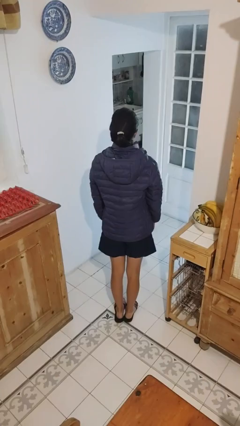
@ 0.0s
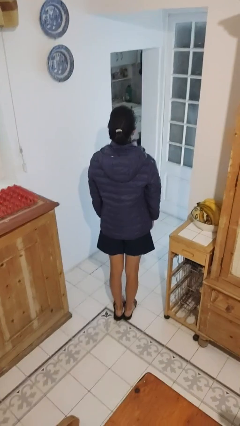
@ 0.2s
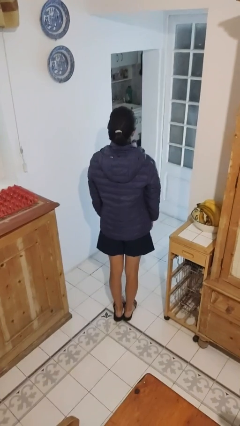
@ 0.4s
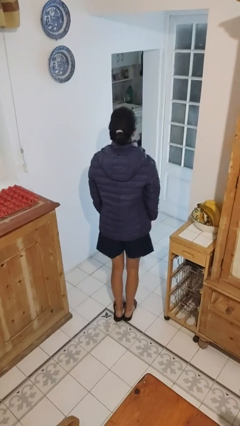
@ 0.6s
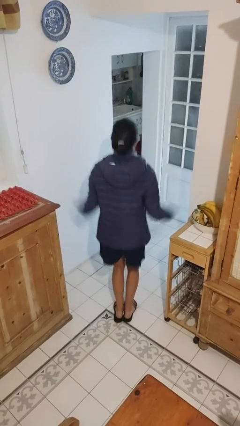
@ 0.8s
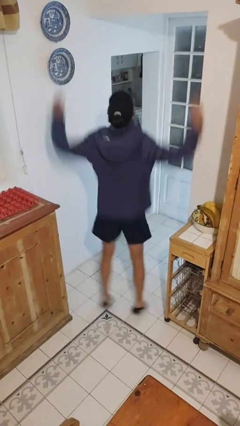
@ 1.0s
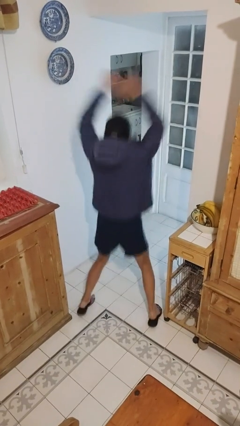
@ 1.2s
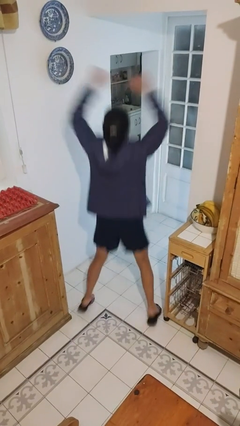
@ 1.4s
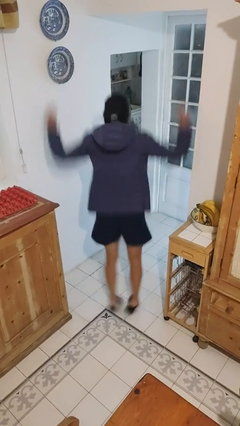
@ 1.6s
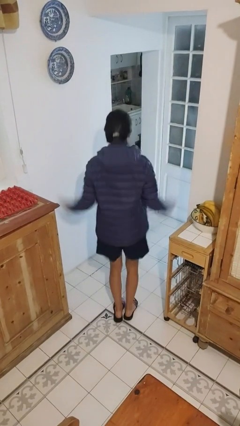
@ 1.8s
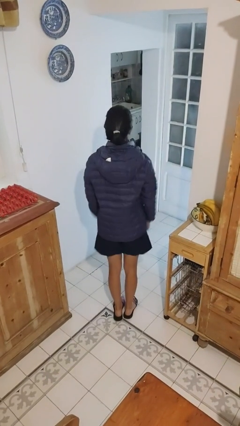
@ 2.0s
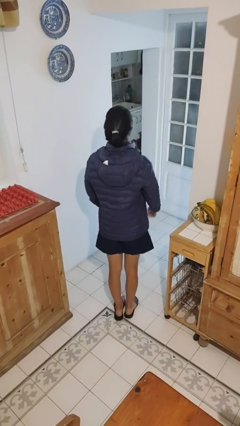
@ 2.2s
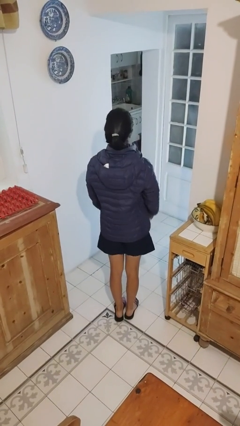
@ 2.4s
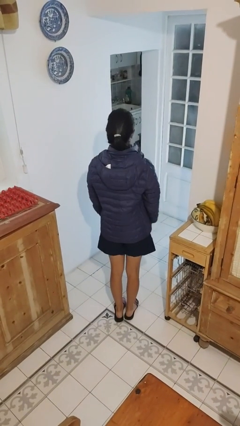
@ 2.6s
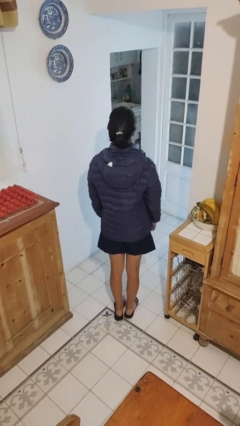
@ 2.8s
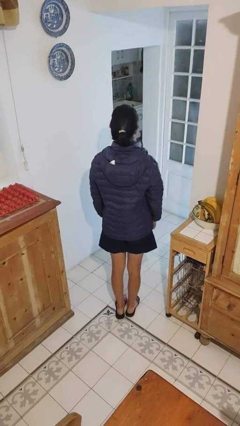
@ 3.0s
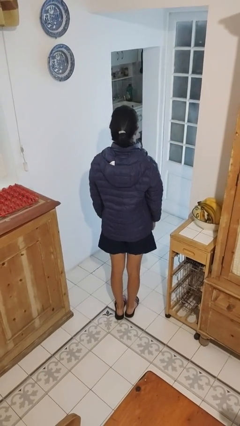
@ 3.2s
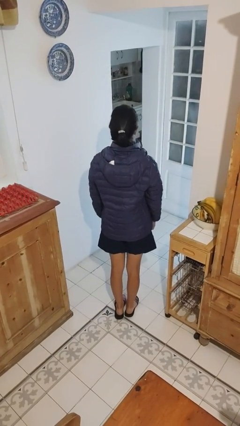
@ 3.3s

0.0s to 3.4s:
person exercises with jumping jacks

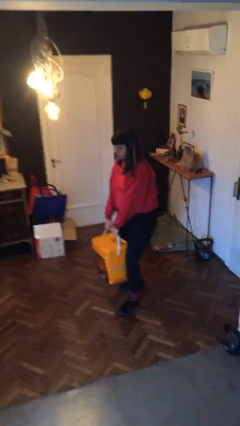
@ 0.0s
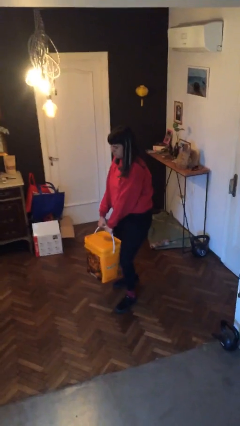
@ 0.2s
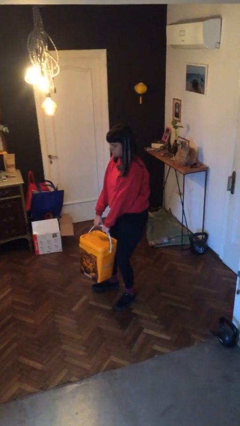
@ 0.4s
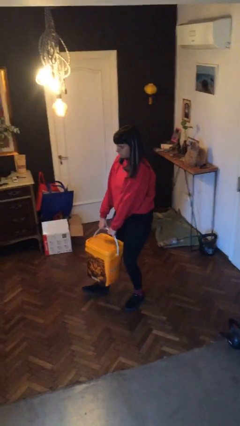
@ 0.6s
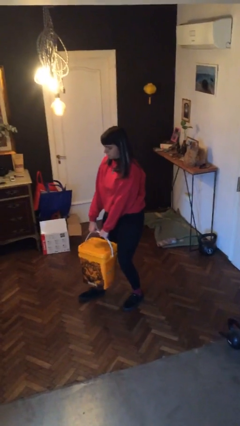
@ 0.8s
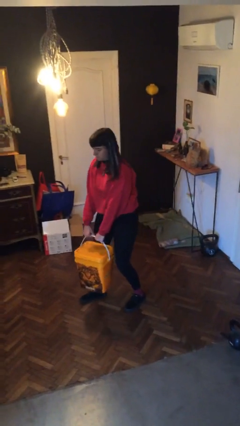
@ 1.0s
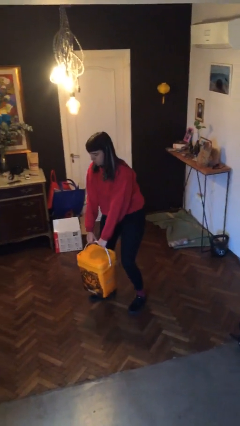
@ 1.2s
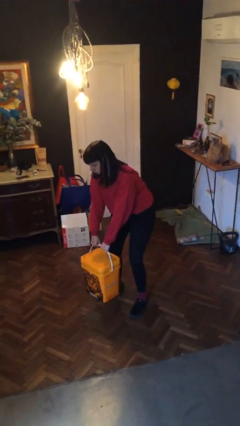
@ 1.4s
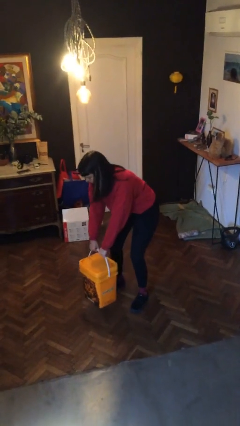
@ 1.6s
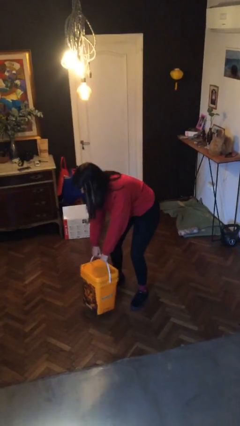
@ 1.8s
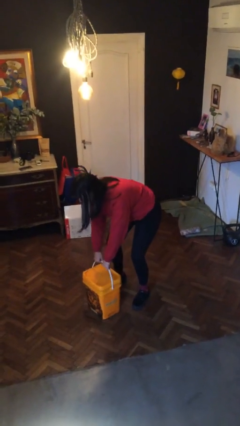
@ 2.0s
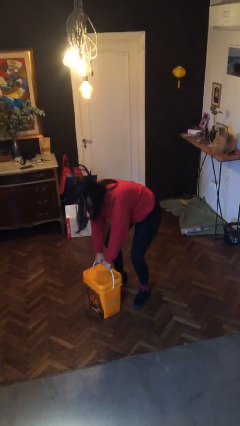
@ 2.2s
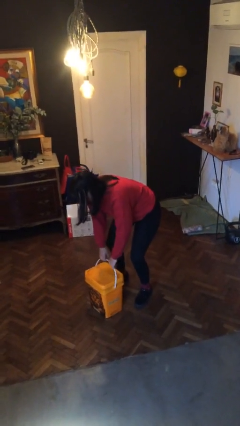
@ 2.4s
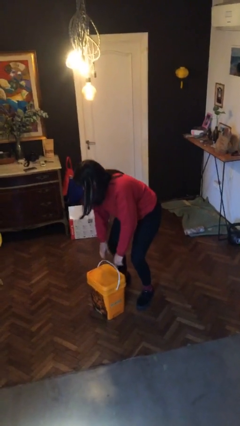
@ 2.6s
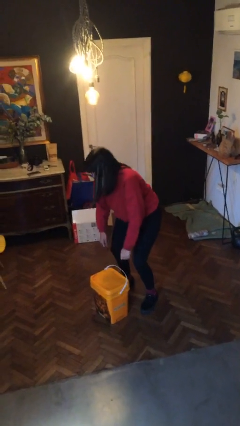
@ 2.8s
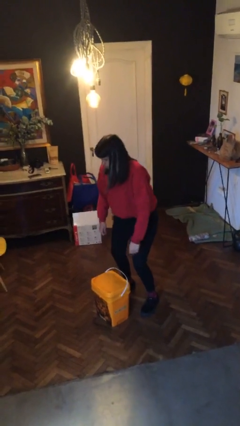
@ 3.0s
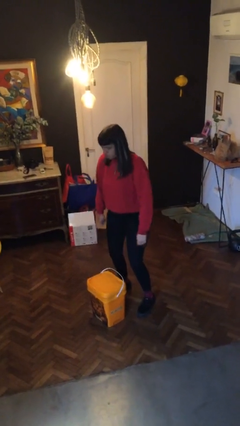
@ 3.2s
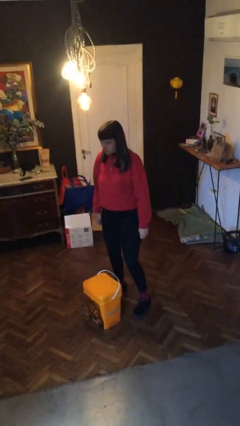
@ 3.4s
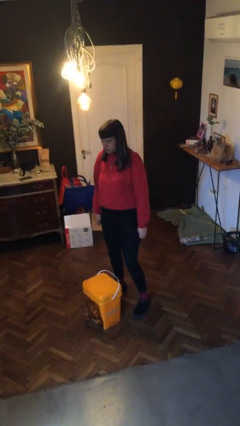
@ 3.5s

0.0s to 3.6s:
person puts down object on floor

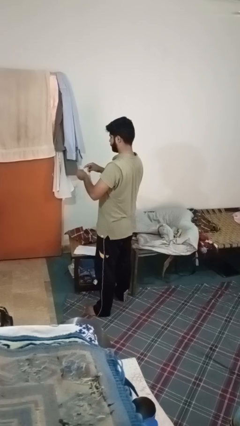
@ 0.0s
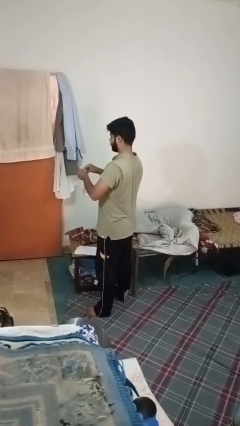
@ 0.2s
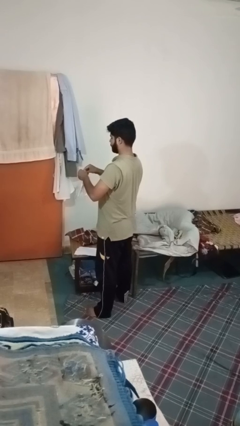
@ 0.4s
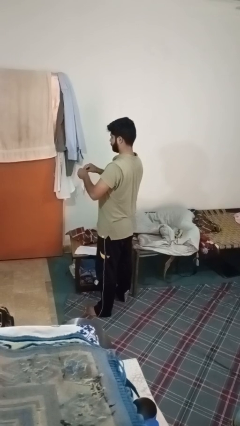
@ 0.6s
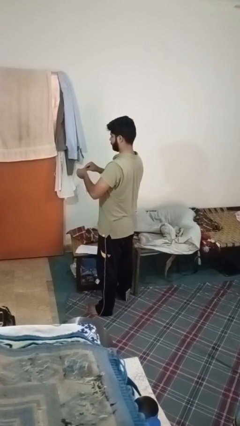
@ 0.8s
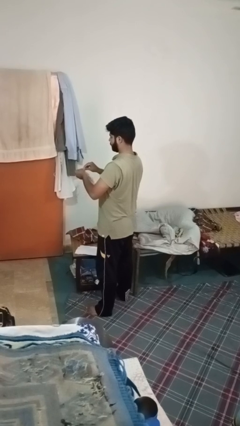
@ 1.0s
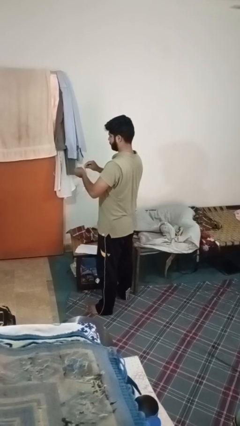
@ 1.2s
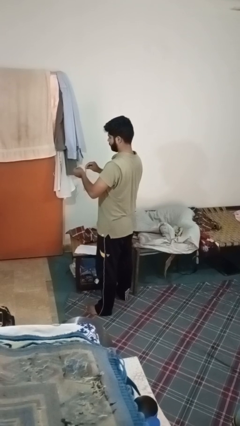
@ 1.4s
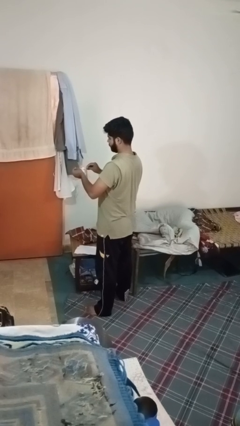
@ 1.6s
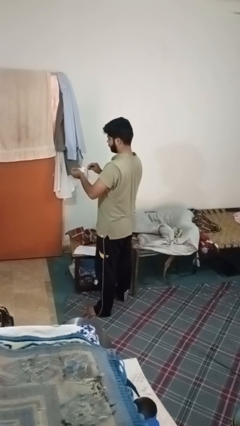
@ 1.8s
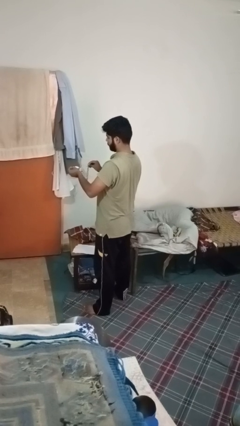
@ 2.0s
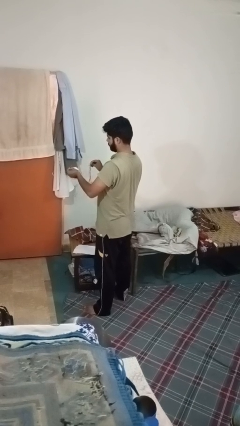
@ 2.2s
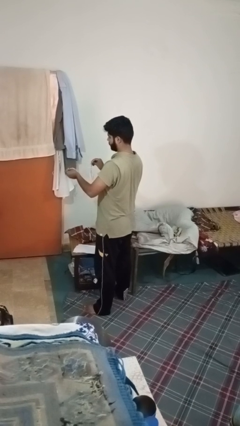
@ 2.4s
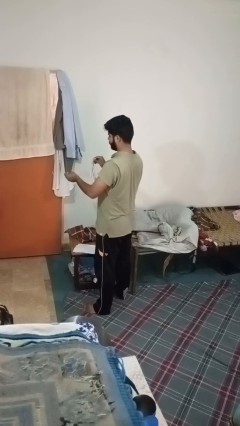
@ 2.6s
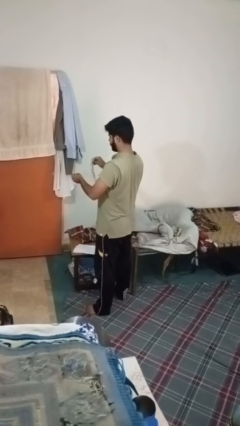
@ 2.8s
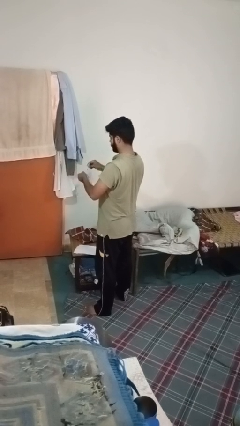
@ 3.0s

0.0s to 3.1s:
person tears paper

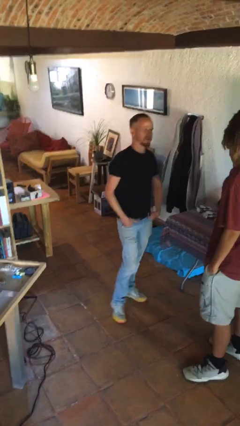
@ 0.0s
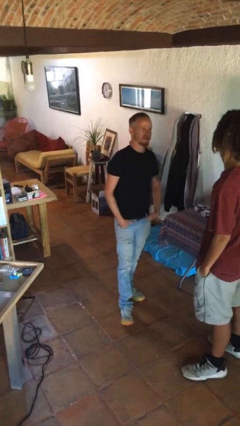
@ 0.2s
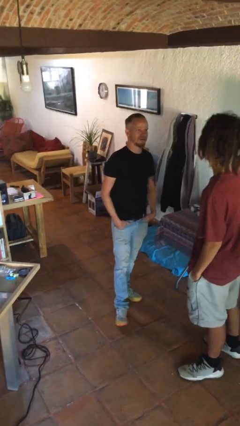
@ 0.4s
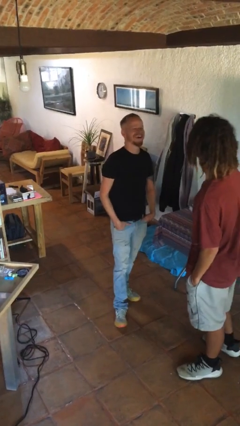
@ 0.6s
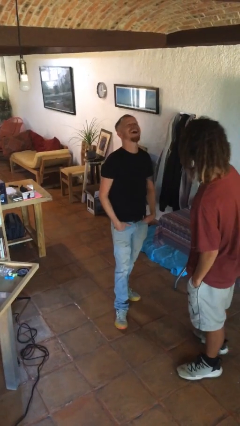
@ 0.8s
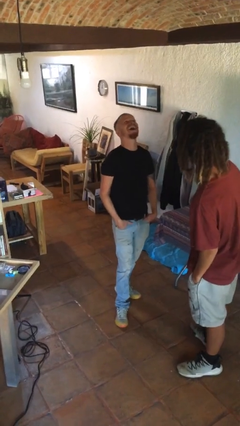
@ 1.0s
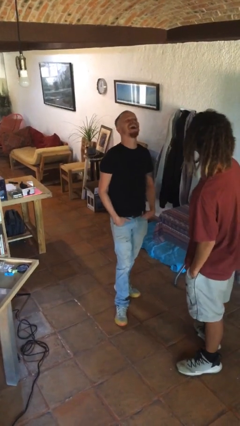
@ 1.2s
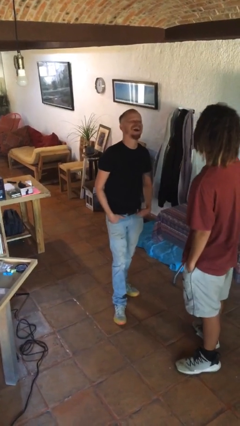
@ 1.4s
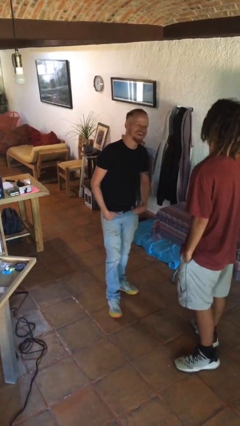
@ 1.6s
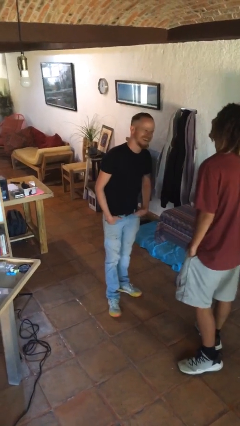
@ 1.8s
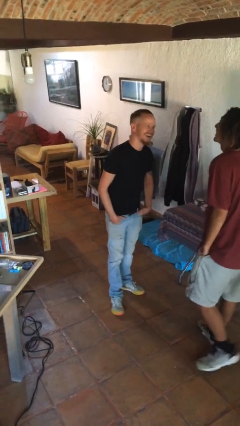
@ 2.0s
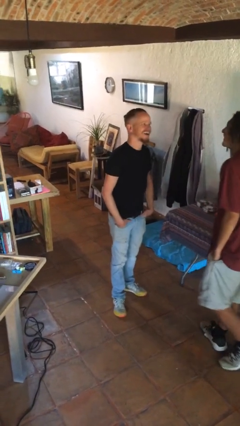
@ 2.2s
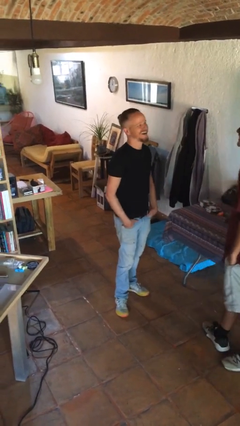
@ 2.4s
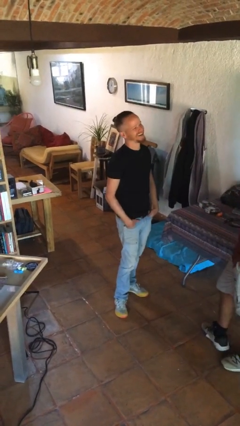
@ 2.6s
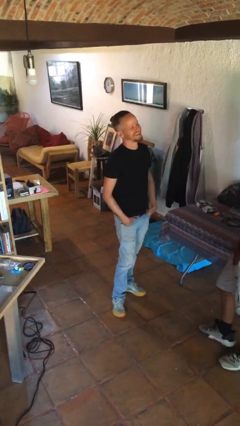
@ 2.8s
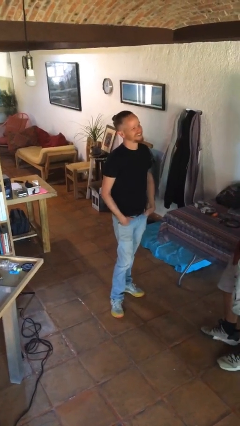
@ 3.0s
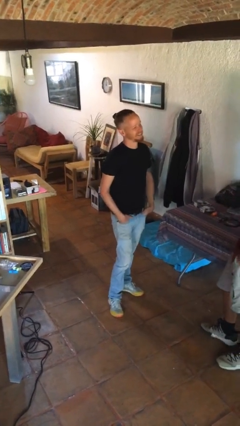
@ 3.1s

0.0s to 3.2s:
person laughs with person

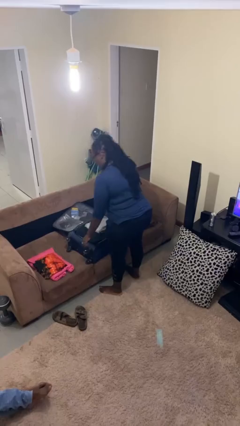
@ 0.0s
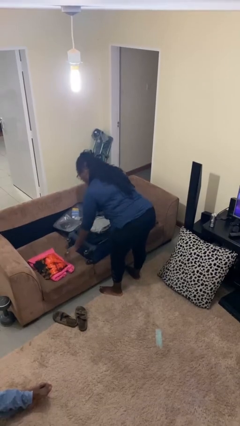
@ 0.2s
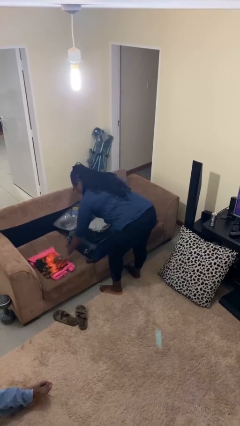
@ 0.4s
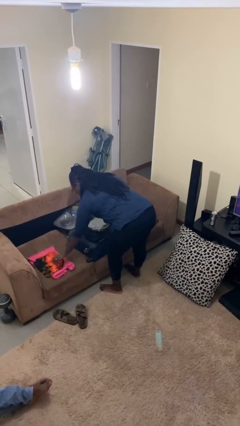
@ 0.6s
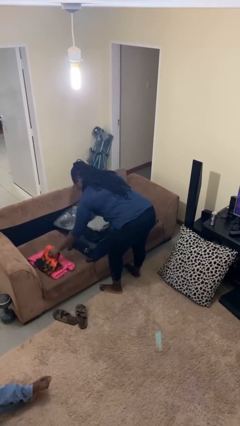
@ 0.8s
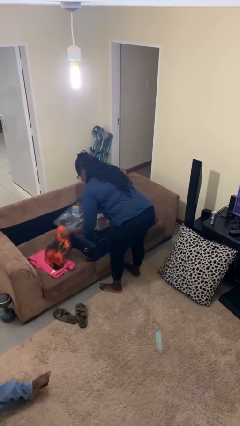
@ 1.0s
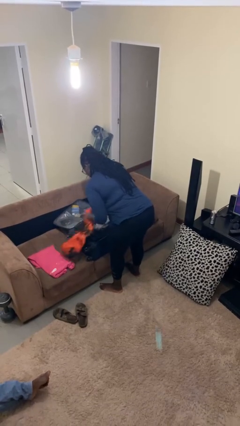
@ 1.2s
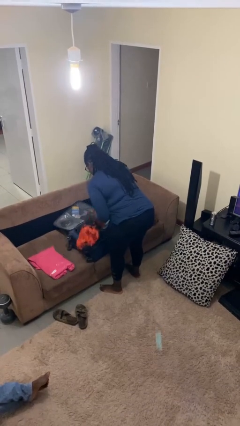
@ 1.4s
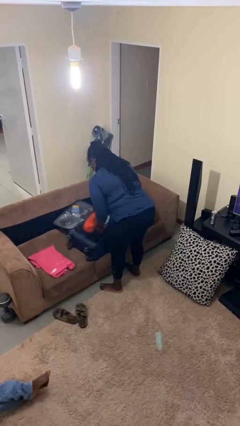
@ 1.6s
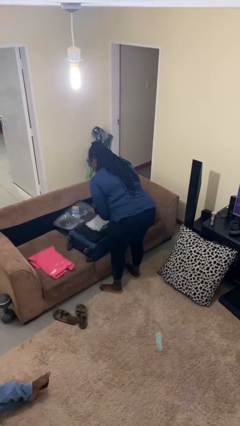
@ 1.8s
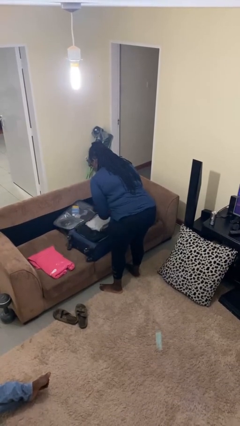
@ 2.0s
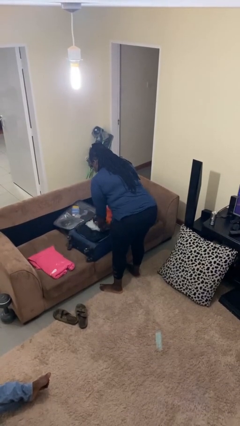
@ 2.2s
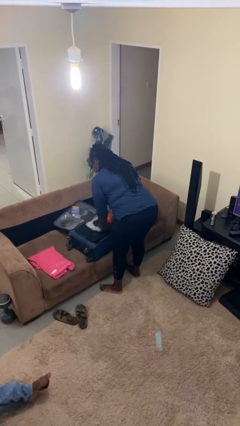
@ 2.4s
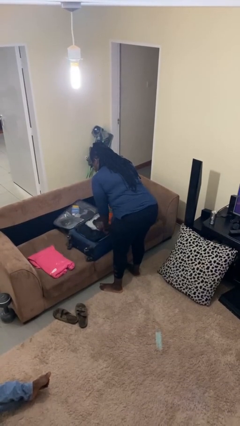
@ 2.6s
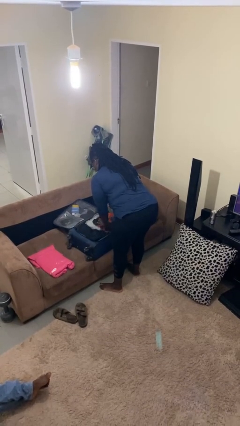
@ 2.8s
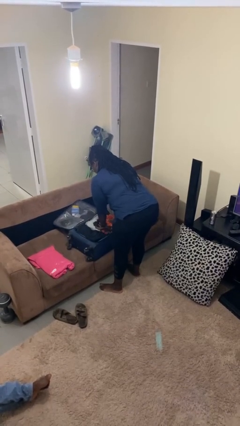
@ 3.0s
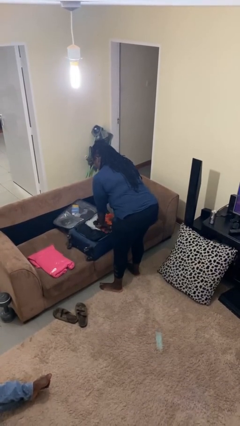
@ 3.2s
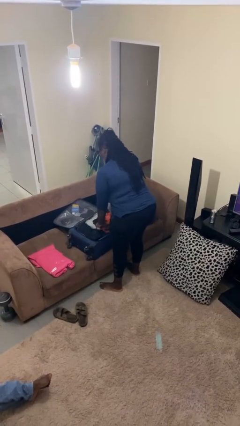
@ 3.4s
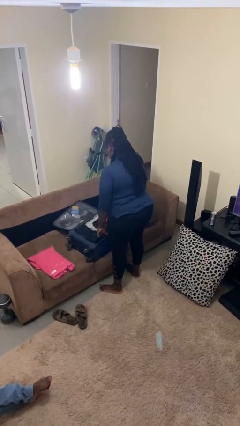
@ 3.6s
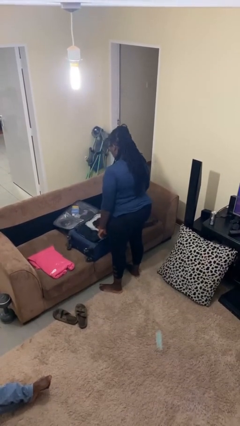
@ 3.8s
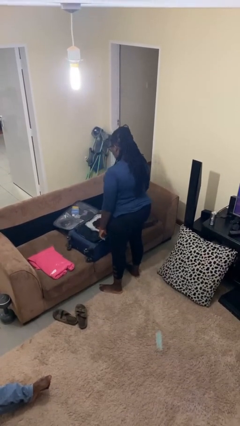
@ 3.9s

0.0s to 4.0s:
person loads clothes into suitcase

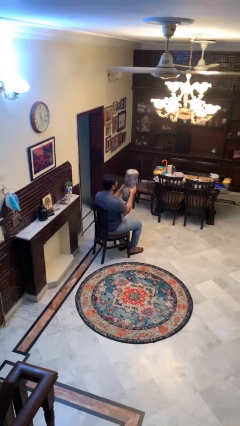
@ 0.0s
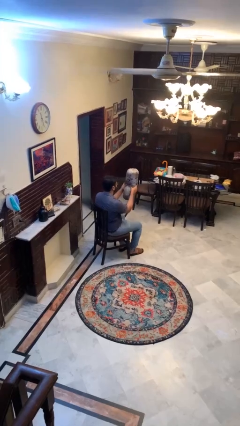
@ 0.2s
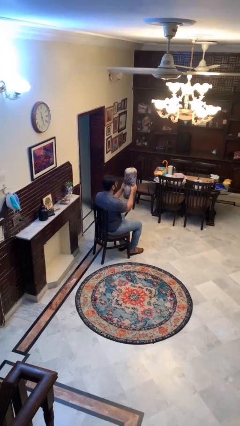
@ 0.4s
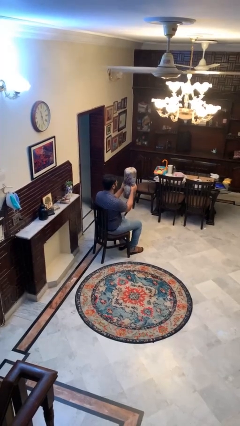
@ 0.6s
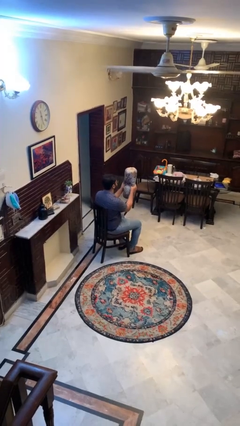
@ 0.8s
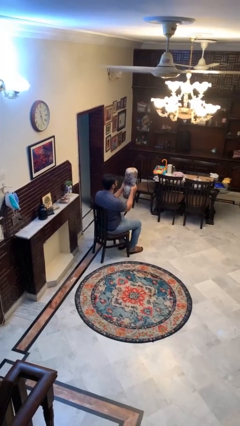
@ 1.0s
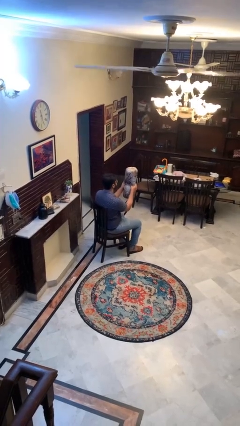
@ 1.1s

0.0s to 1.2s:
person squeezes object
